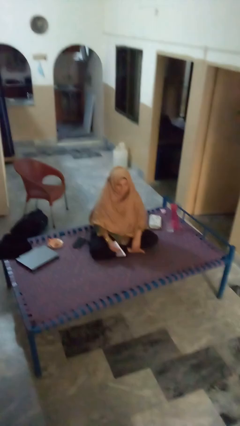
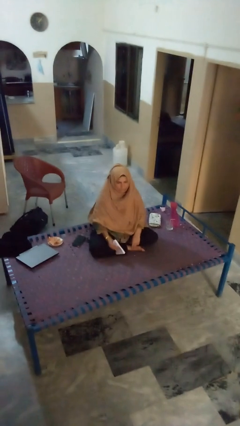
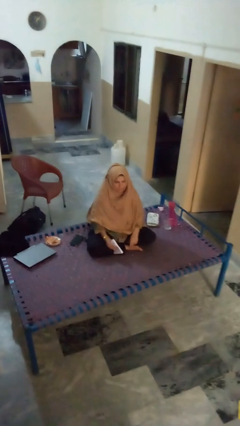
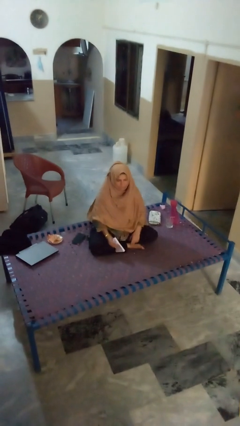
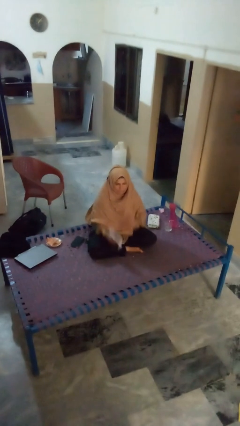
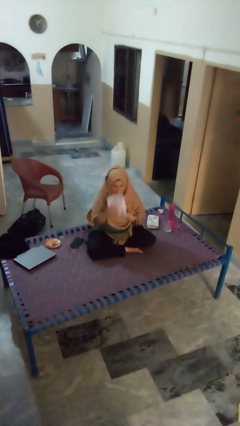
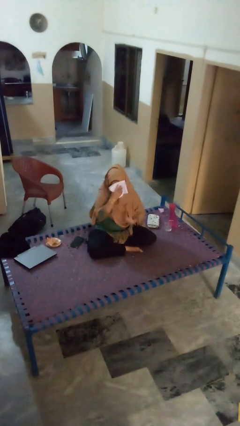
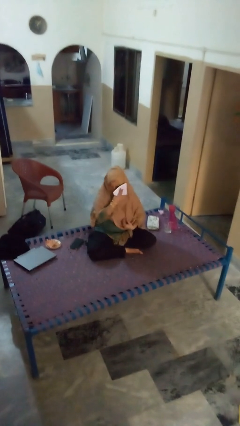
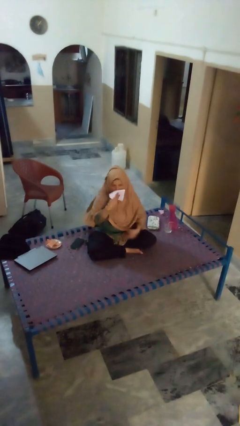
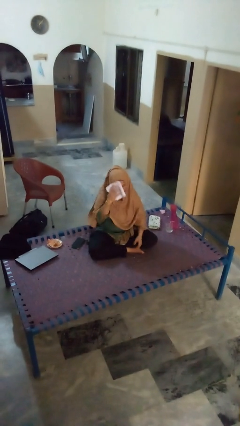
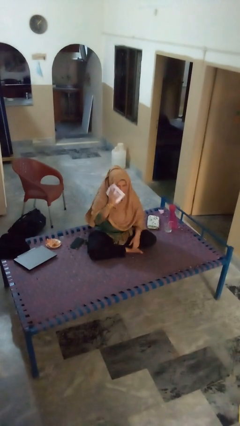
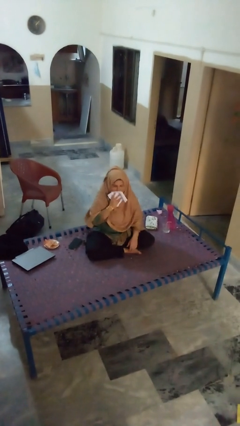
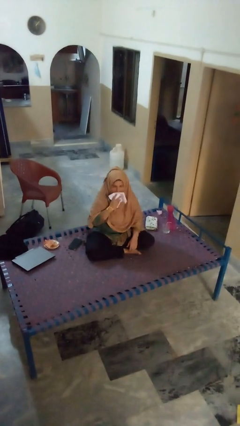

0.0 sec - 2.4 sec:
person wipes mouth with napkin

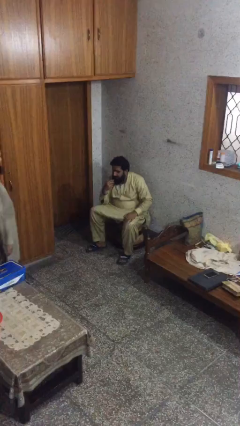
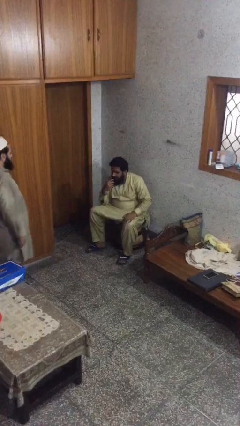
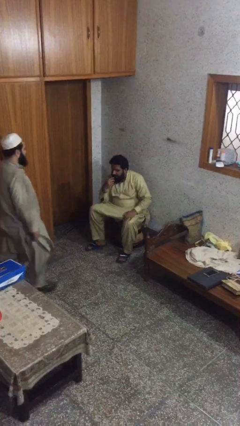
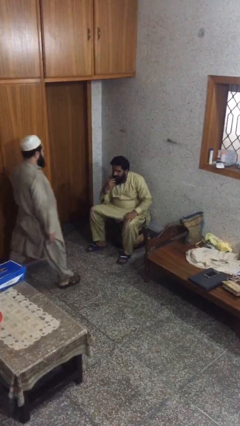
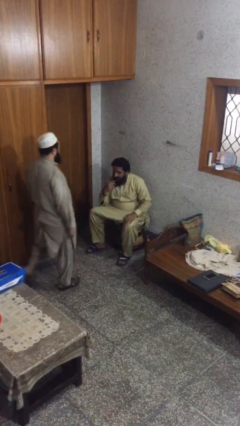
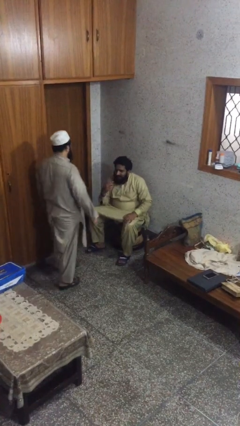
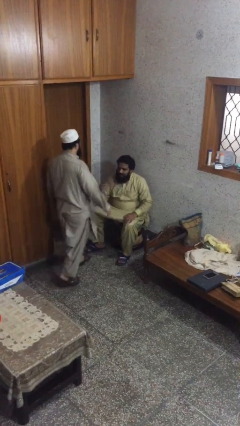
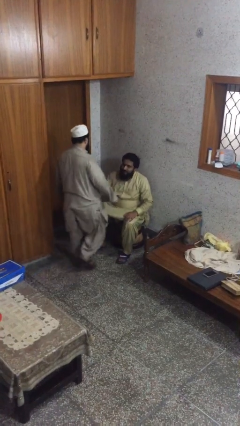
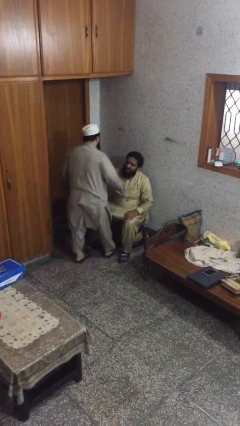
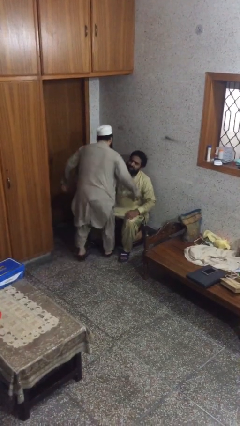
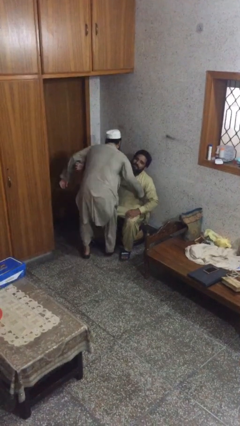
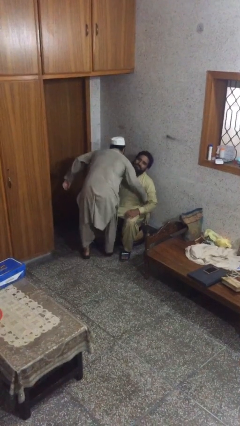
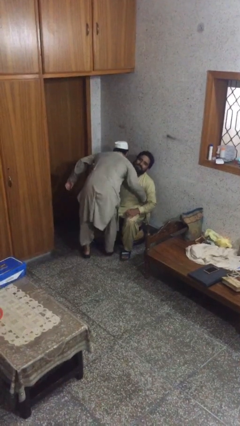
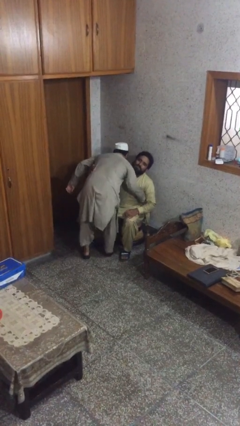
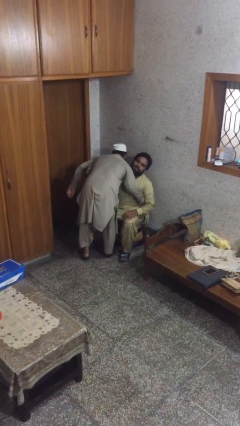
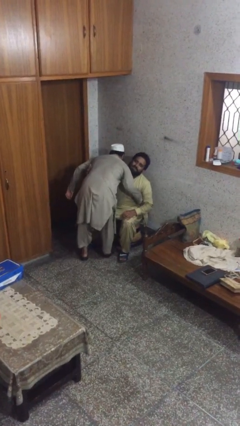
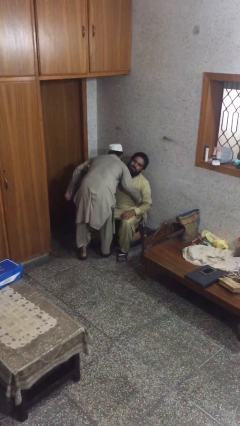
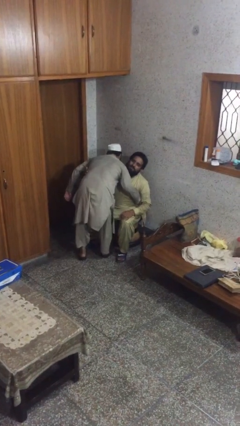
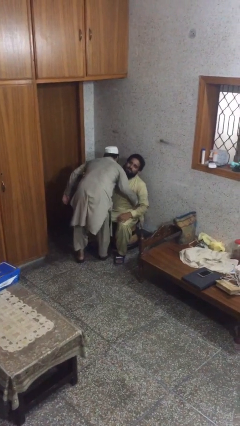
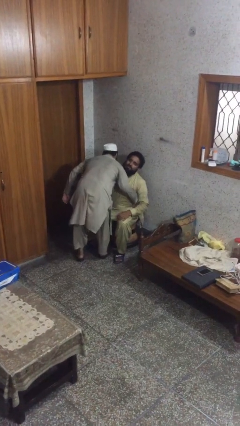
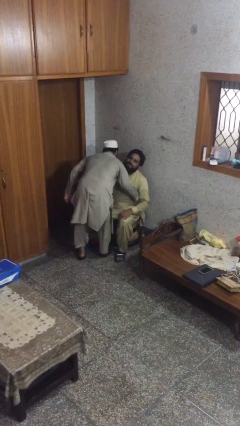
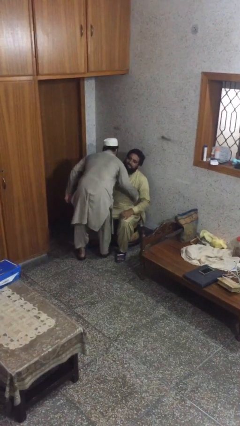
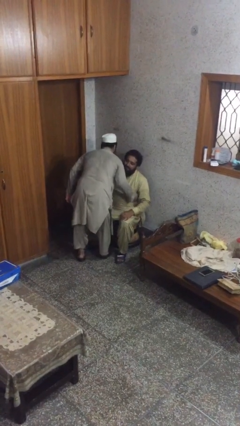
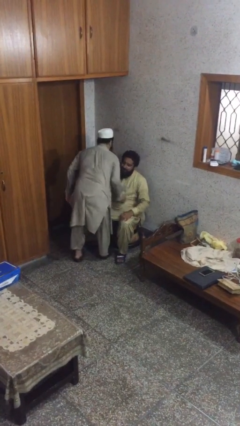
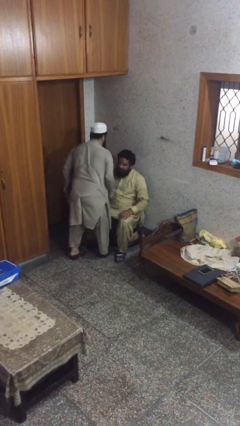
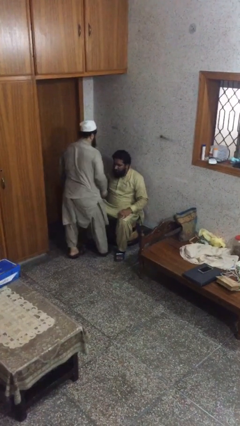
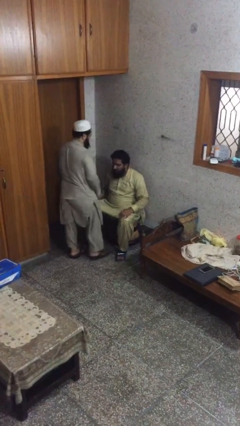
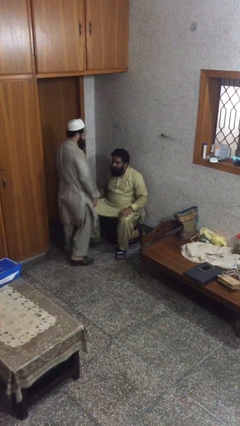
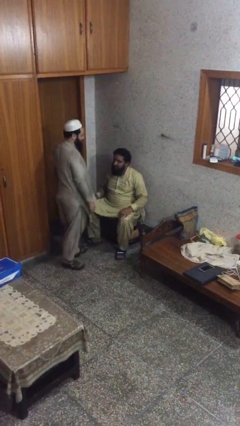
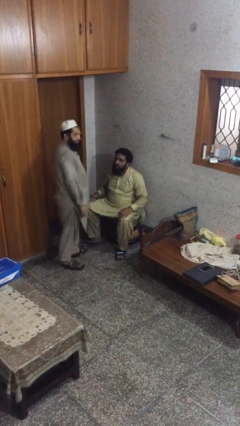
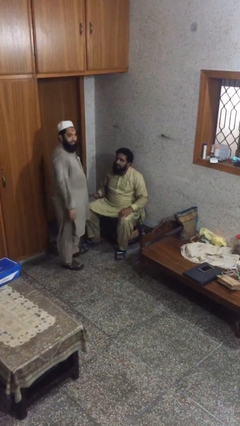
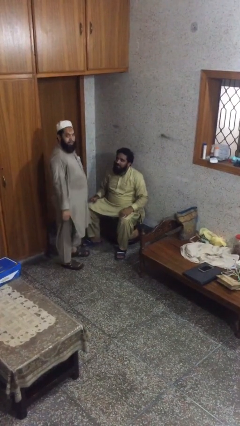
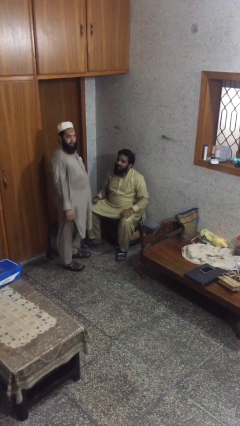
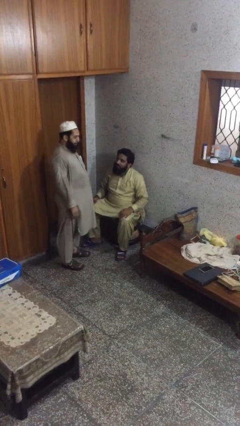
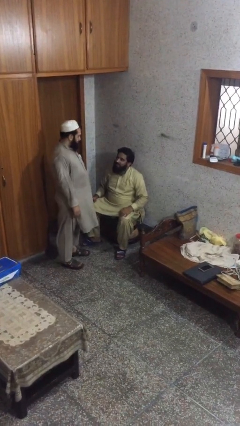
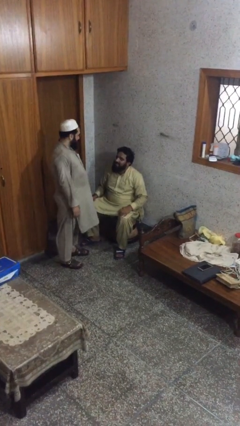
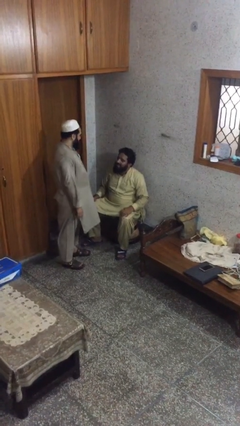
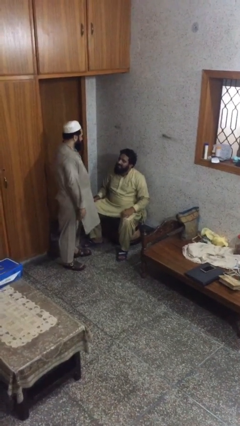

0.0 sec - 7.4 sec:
person embraces person

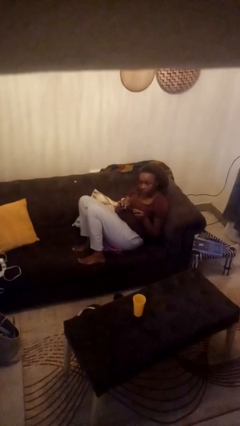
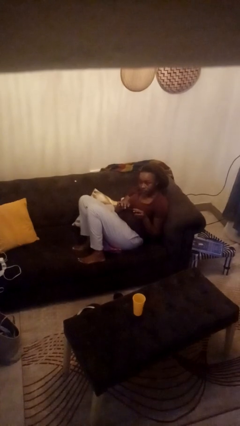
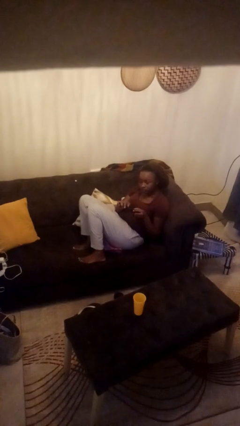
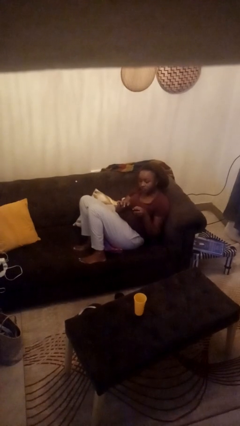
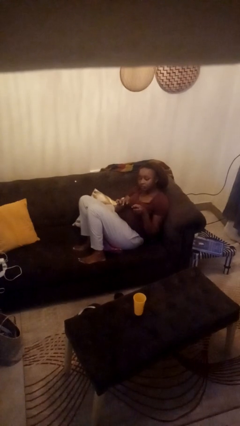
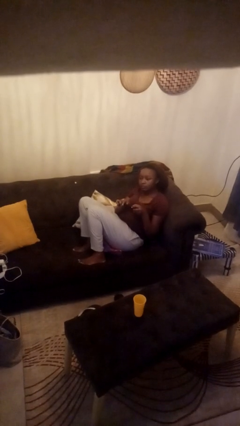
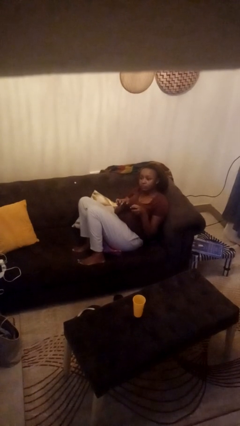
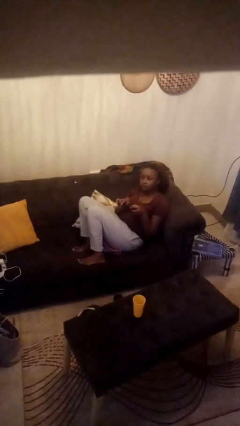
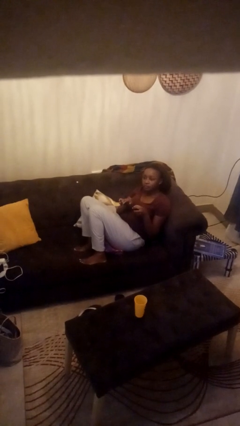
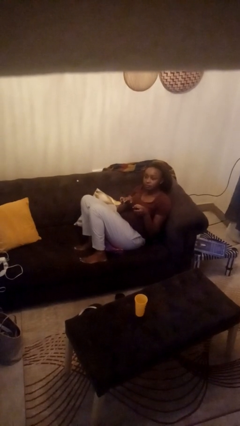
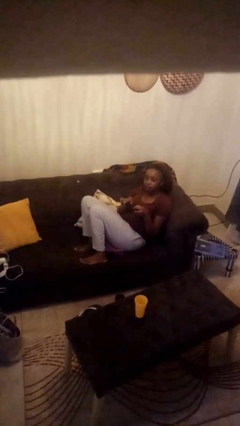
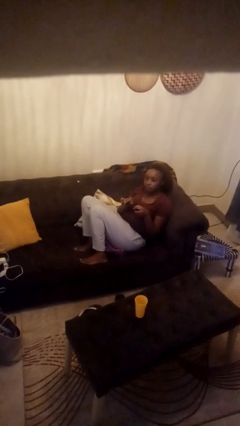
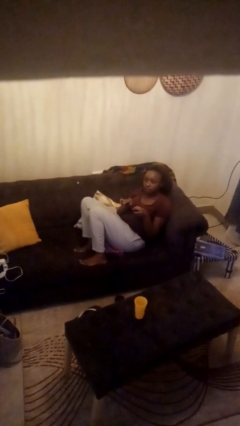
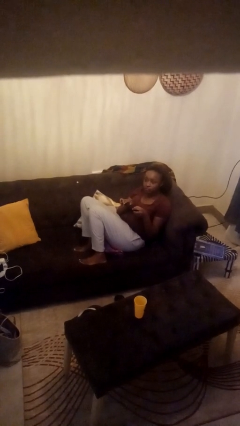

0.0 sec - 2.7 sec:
person interacts with handheld game

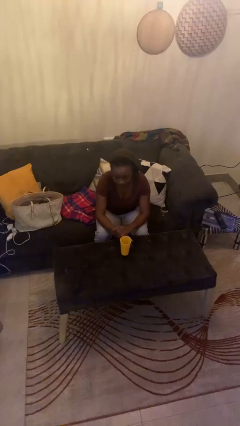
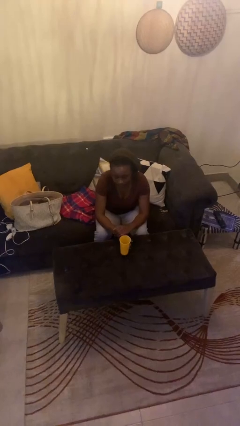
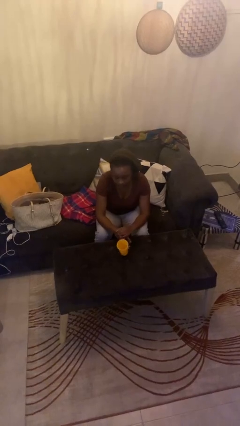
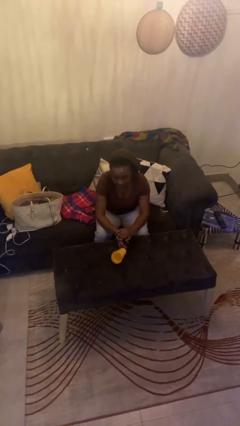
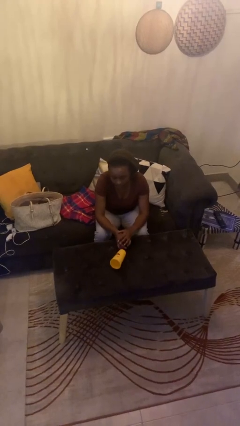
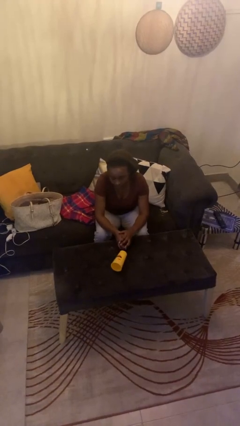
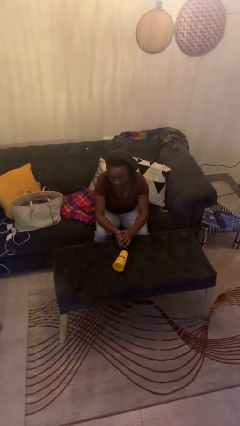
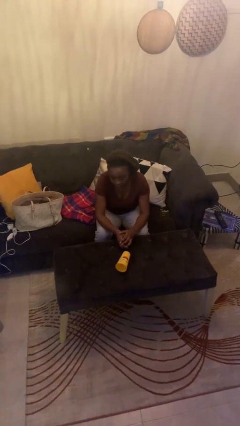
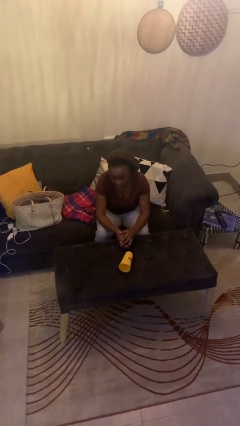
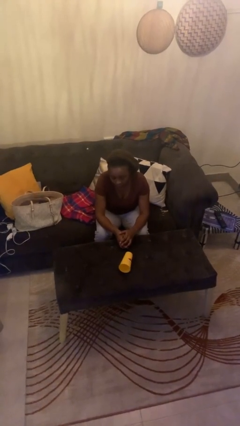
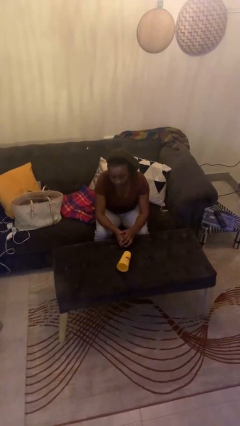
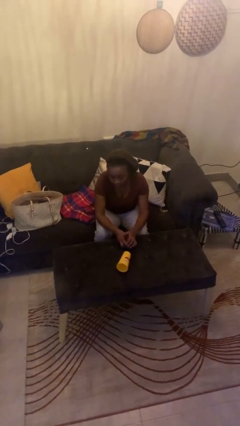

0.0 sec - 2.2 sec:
person knocks over glass

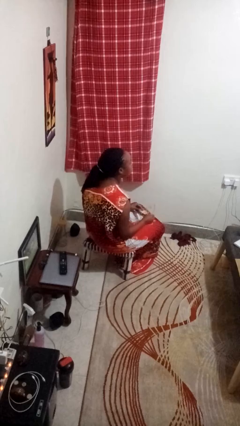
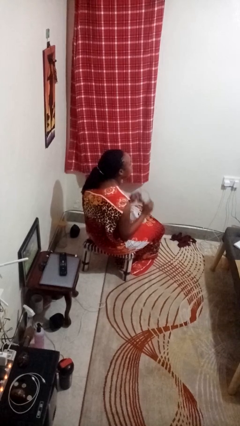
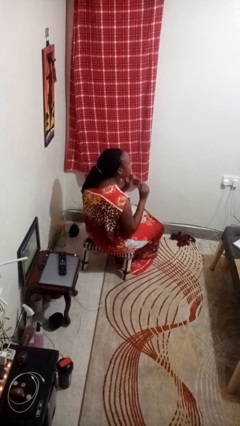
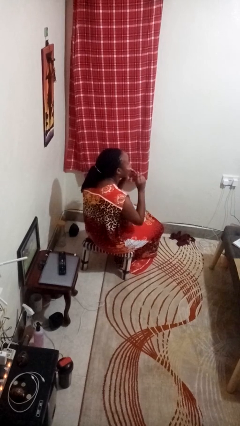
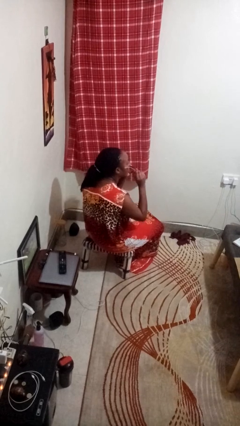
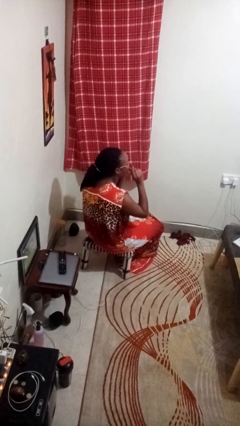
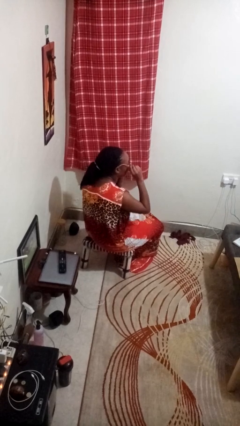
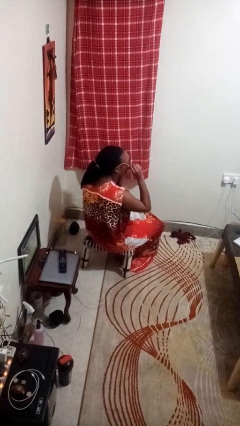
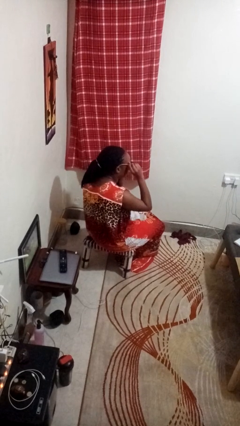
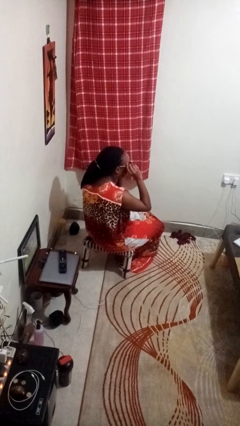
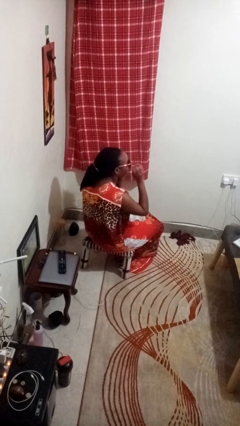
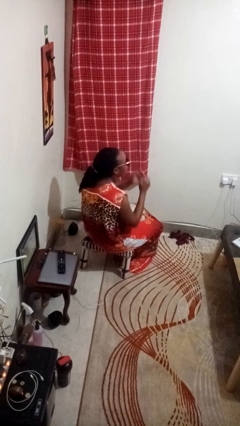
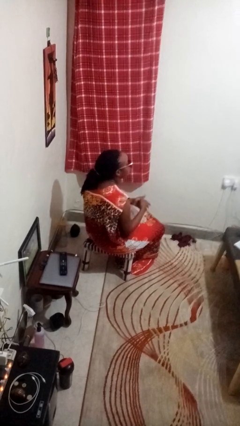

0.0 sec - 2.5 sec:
person puts on sunglasses

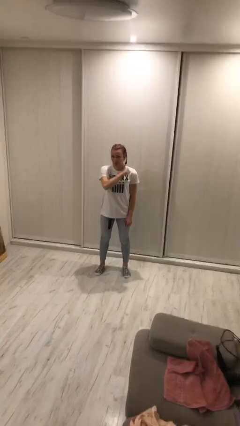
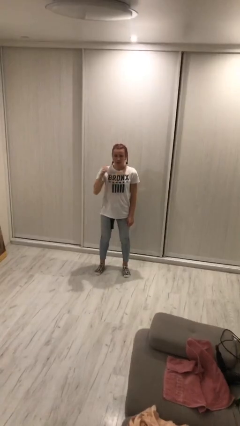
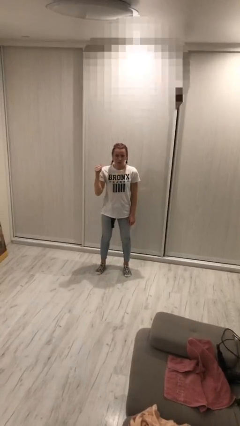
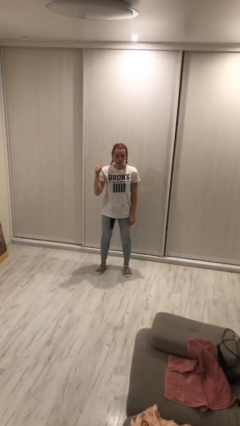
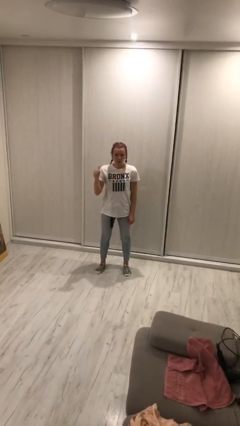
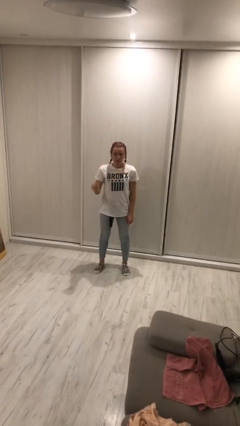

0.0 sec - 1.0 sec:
person gestures cut
